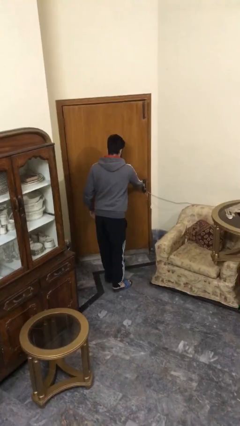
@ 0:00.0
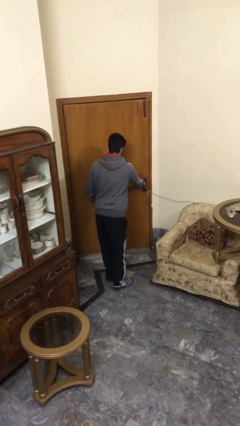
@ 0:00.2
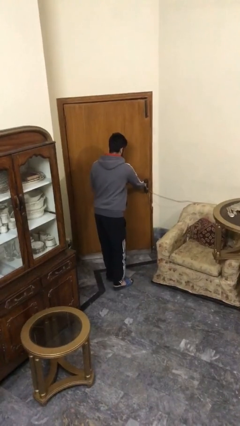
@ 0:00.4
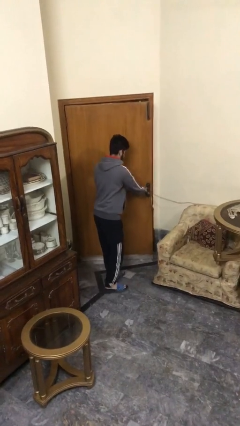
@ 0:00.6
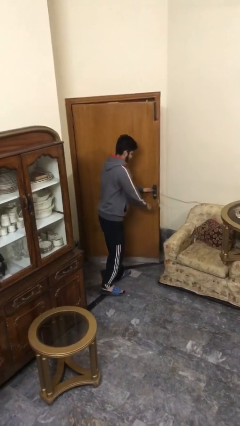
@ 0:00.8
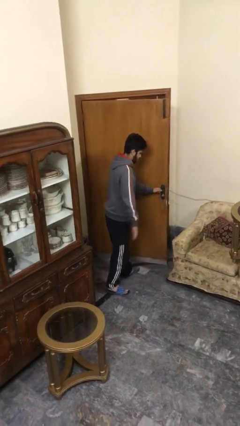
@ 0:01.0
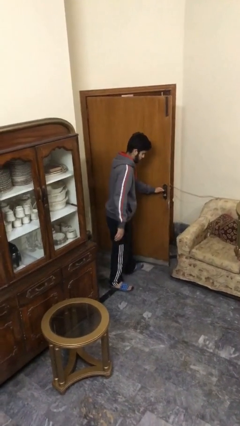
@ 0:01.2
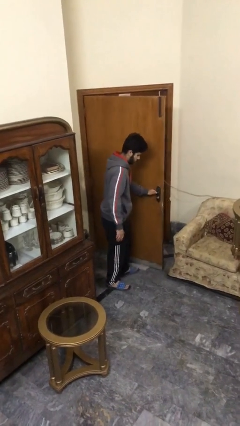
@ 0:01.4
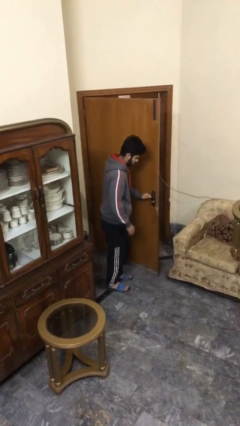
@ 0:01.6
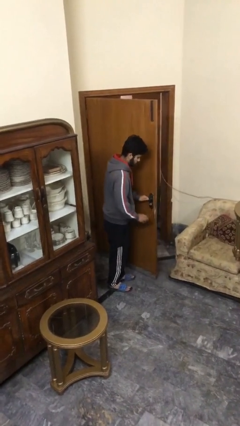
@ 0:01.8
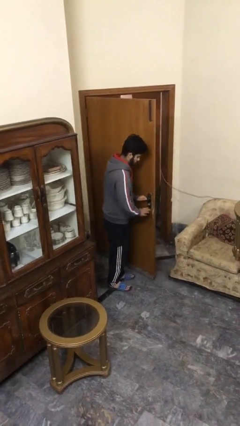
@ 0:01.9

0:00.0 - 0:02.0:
person opens facility door

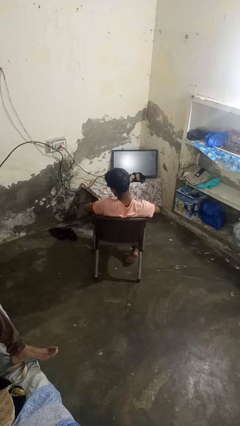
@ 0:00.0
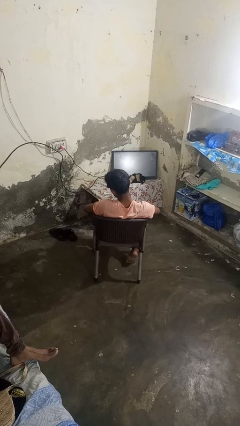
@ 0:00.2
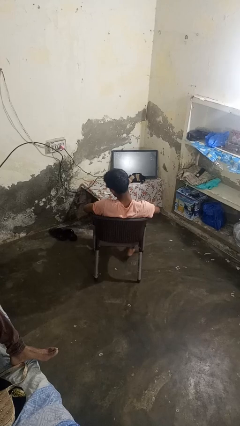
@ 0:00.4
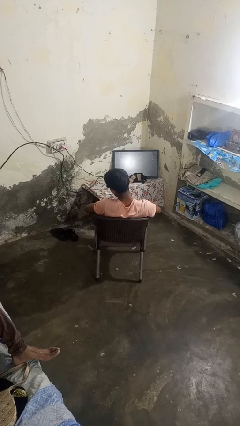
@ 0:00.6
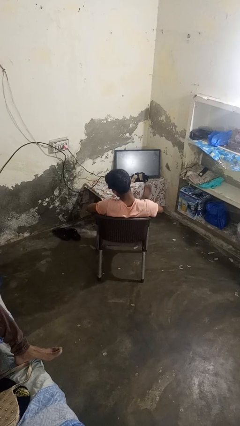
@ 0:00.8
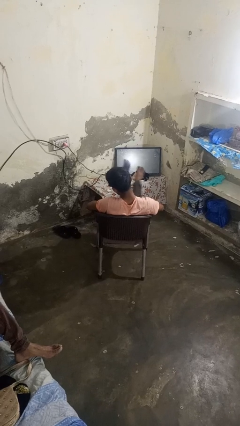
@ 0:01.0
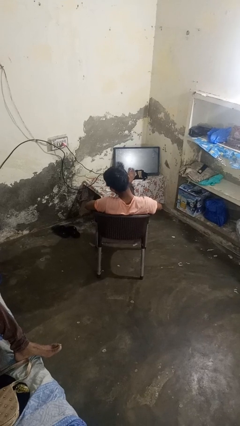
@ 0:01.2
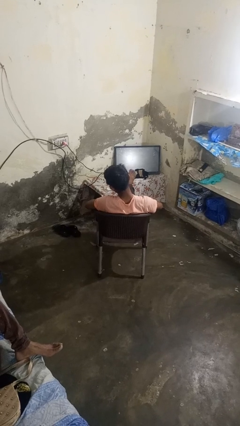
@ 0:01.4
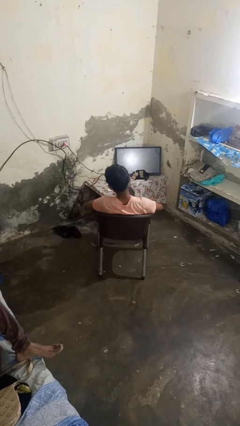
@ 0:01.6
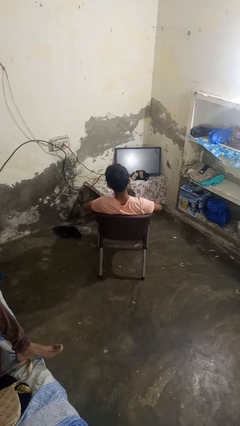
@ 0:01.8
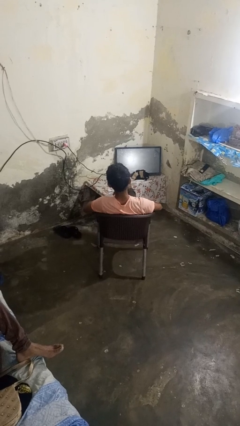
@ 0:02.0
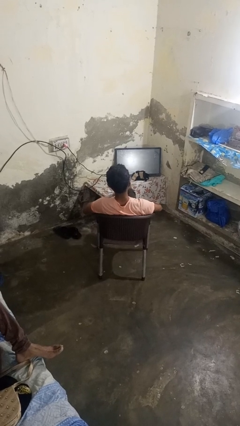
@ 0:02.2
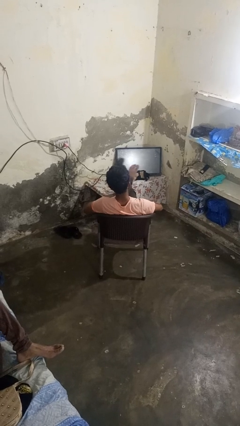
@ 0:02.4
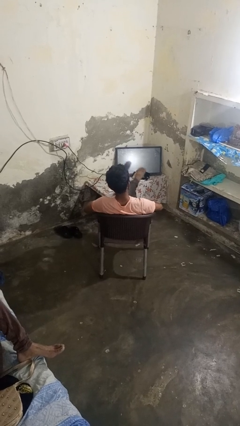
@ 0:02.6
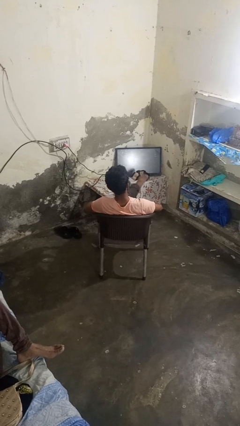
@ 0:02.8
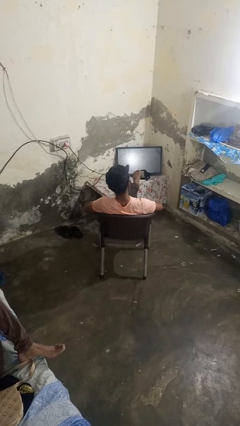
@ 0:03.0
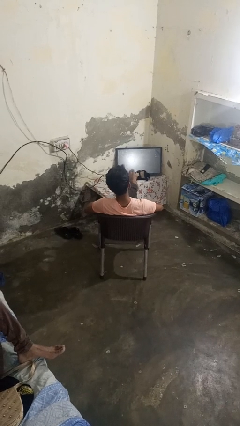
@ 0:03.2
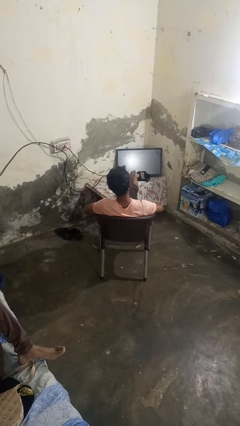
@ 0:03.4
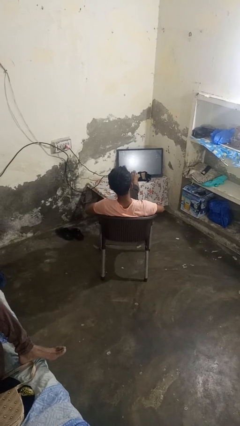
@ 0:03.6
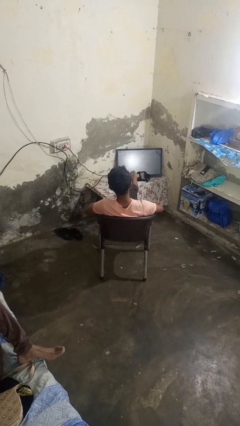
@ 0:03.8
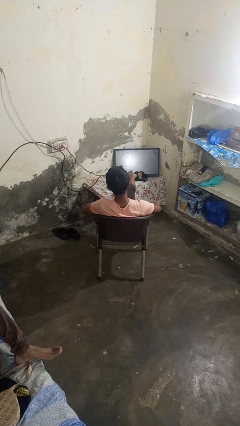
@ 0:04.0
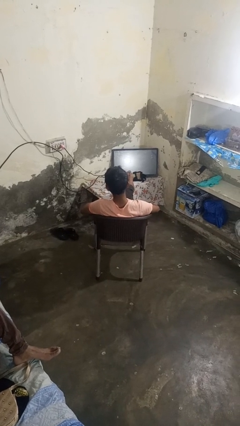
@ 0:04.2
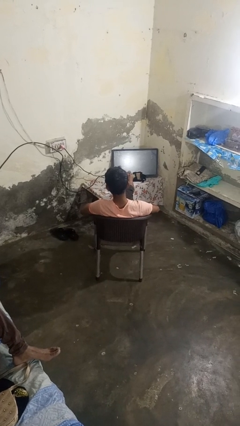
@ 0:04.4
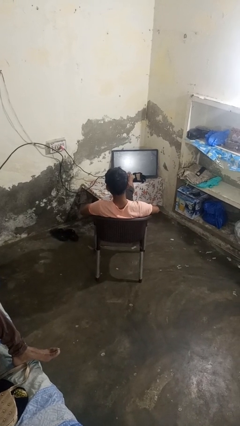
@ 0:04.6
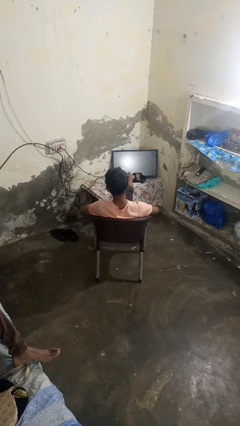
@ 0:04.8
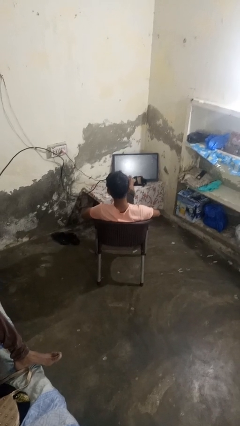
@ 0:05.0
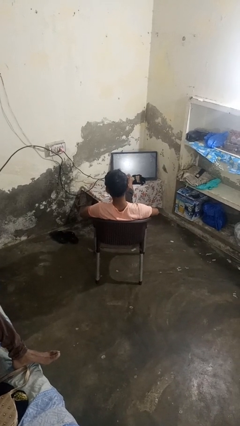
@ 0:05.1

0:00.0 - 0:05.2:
person puts feet up

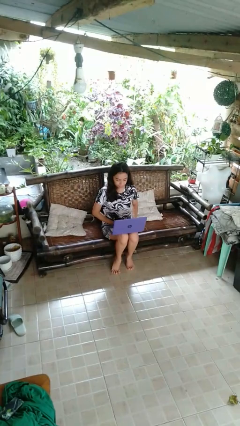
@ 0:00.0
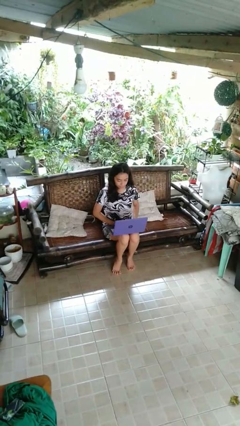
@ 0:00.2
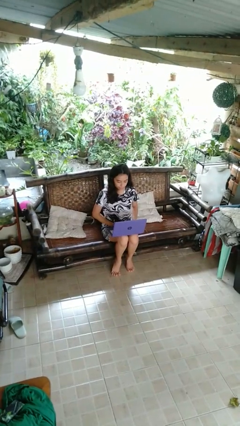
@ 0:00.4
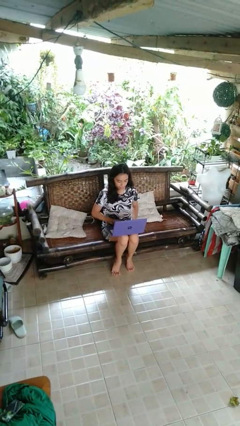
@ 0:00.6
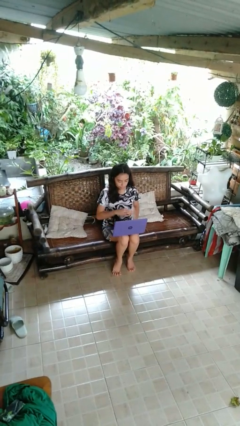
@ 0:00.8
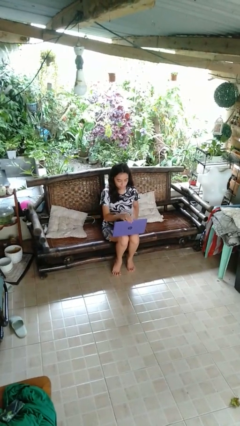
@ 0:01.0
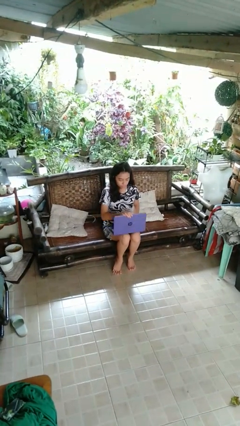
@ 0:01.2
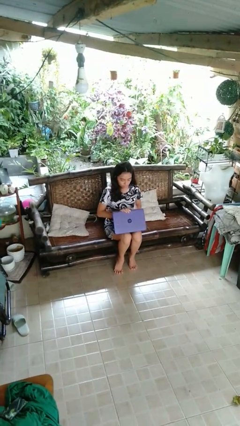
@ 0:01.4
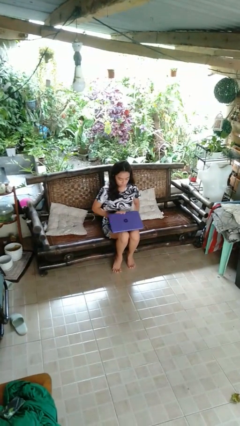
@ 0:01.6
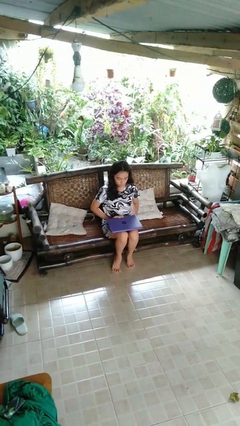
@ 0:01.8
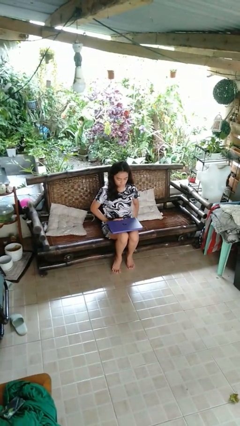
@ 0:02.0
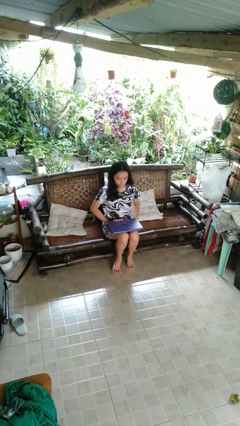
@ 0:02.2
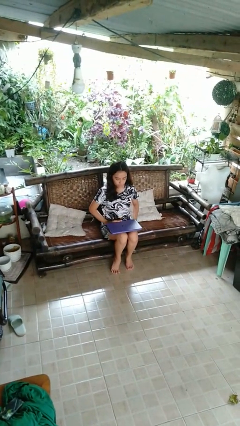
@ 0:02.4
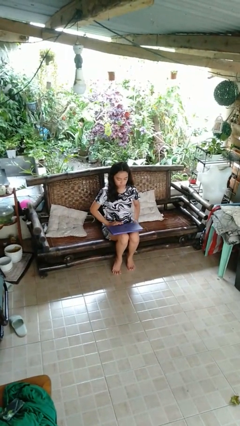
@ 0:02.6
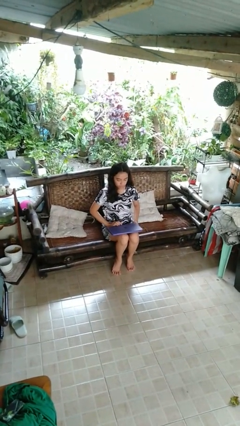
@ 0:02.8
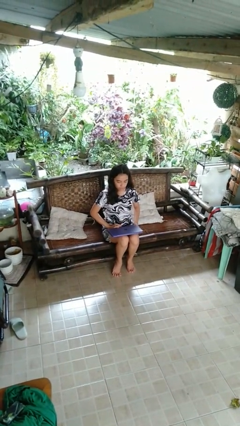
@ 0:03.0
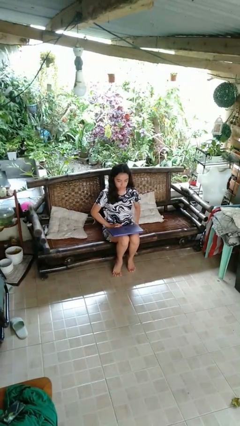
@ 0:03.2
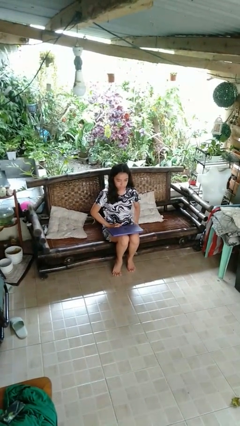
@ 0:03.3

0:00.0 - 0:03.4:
person closes laptop

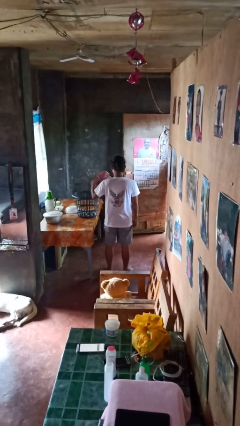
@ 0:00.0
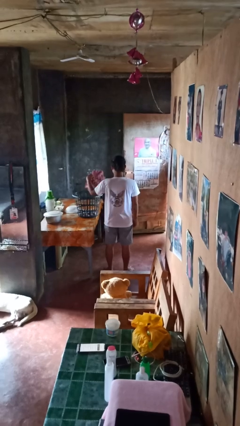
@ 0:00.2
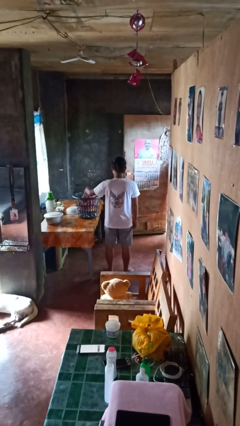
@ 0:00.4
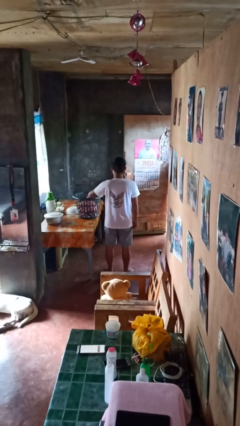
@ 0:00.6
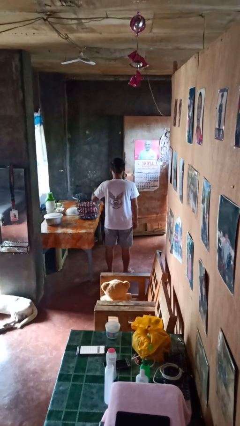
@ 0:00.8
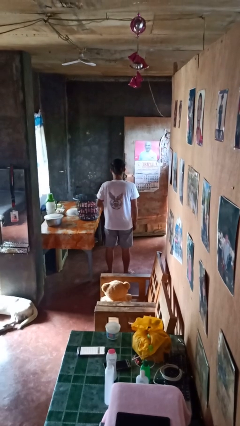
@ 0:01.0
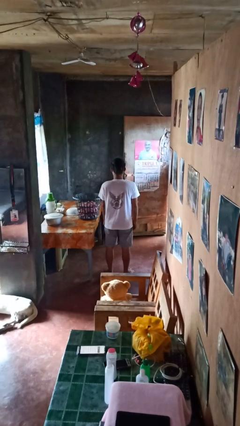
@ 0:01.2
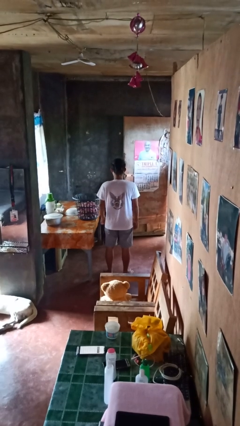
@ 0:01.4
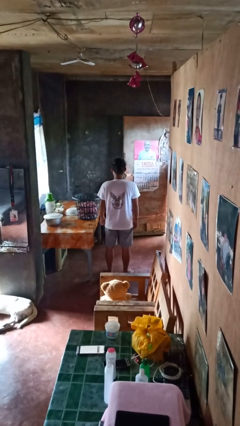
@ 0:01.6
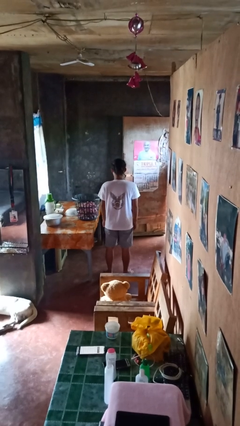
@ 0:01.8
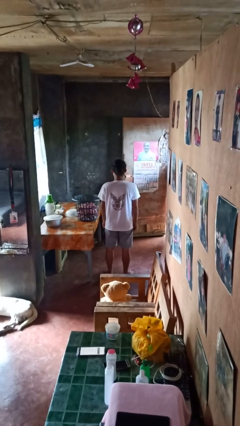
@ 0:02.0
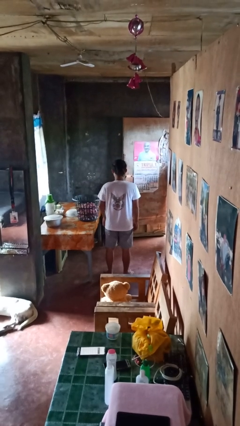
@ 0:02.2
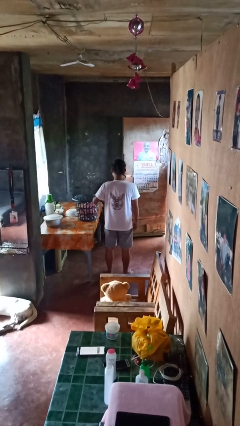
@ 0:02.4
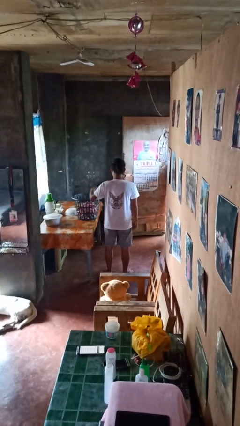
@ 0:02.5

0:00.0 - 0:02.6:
person puts object into basket

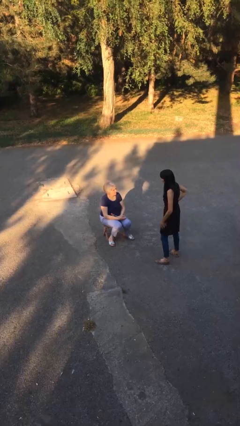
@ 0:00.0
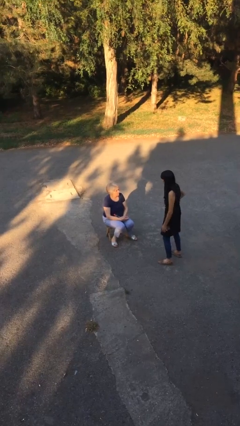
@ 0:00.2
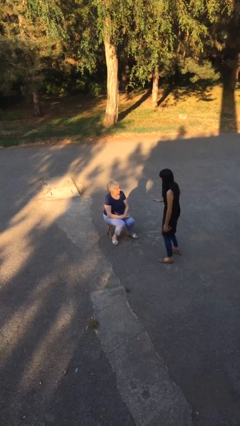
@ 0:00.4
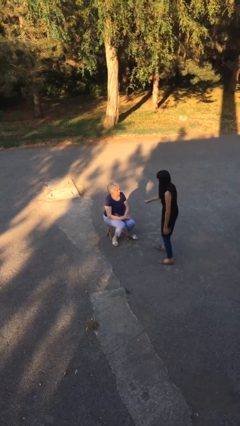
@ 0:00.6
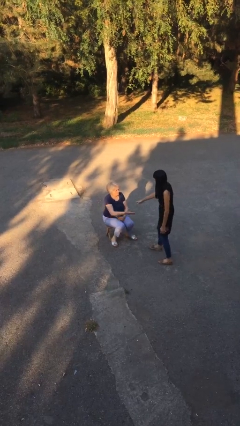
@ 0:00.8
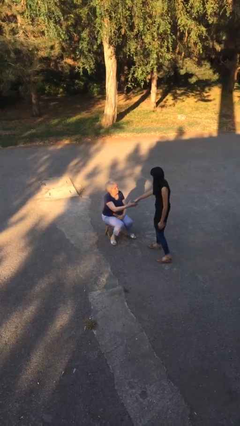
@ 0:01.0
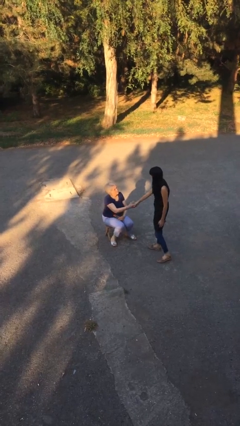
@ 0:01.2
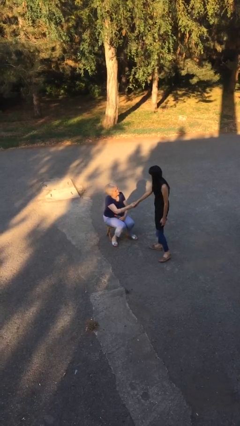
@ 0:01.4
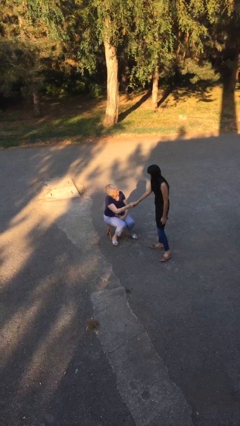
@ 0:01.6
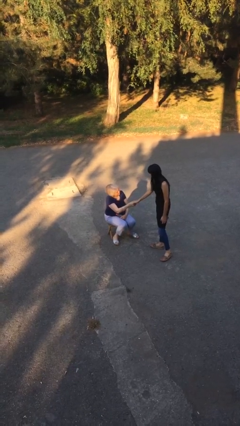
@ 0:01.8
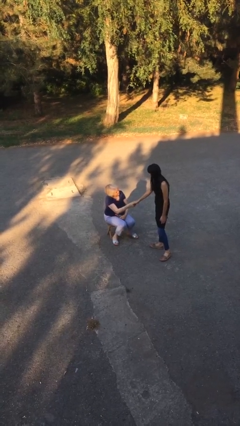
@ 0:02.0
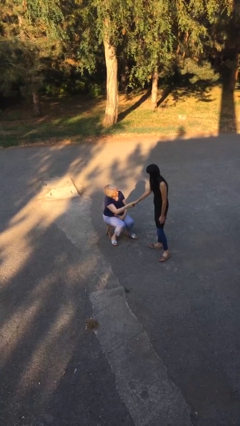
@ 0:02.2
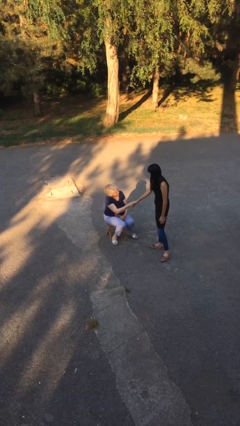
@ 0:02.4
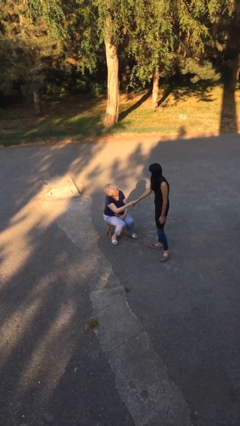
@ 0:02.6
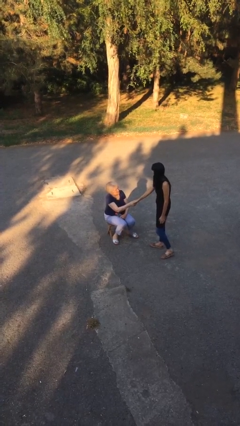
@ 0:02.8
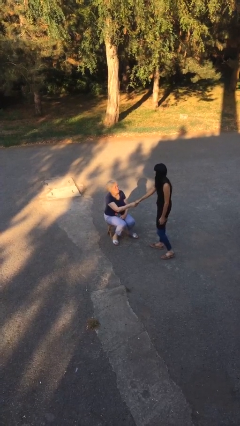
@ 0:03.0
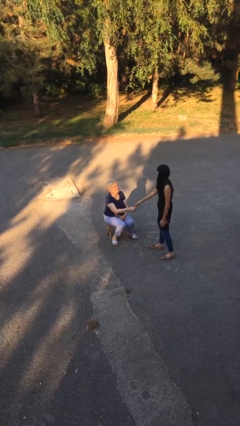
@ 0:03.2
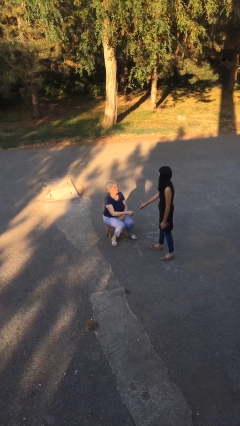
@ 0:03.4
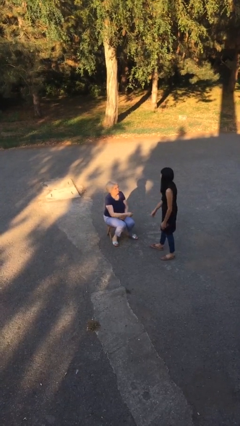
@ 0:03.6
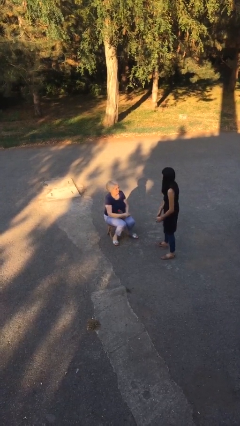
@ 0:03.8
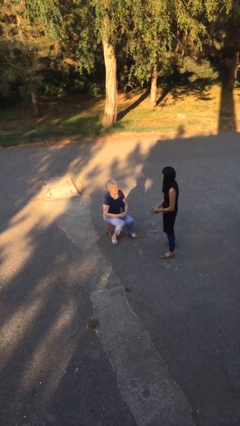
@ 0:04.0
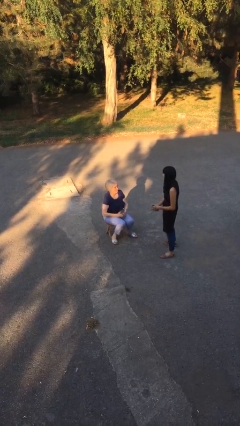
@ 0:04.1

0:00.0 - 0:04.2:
person shakes hand
